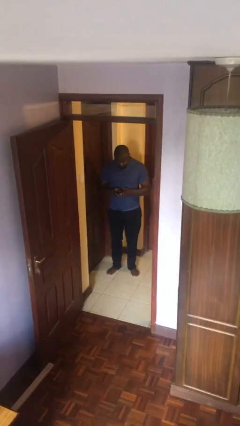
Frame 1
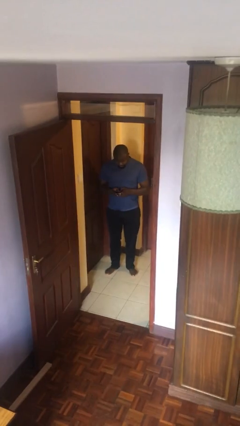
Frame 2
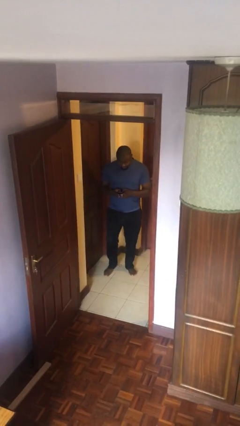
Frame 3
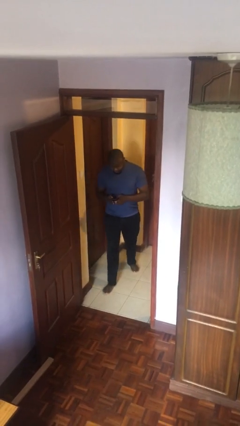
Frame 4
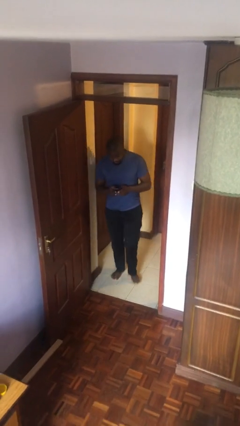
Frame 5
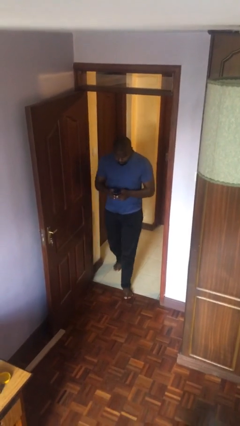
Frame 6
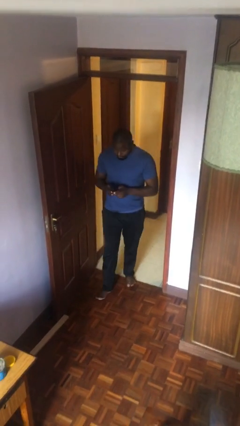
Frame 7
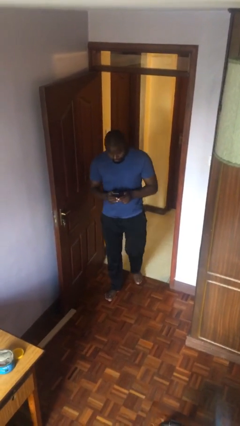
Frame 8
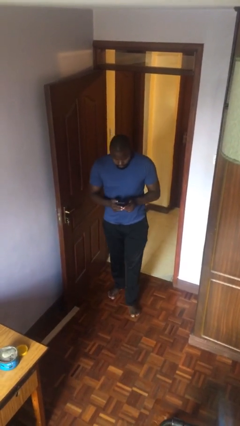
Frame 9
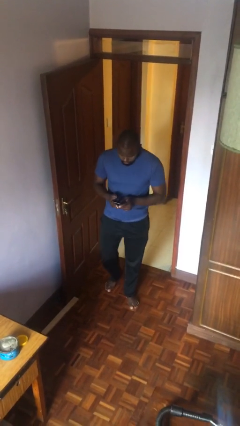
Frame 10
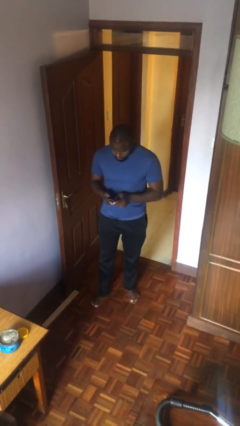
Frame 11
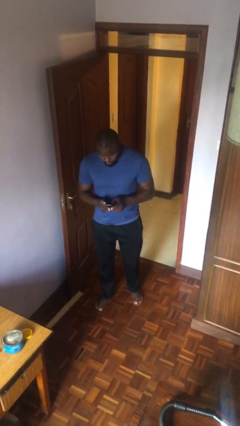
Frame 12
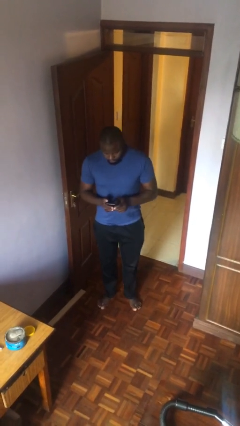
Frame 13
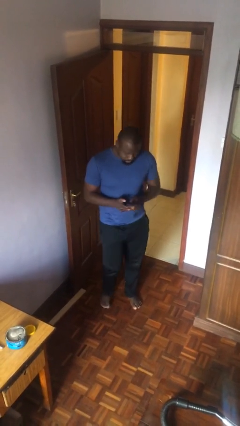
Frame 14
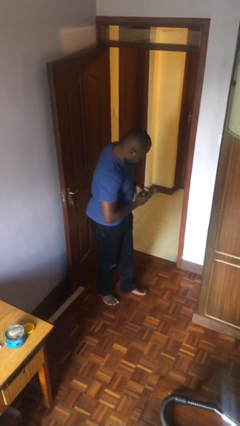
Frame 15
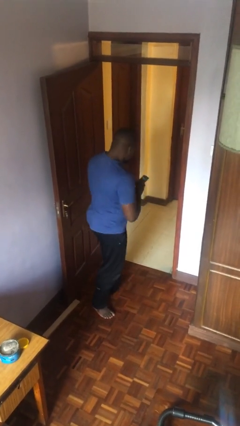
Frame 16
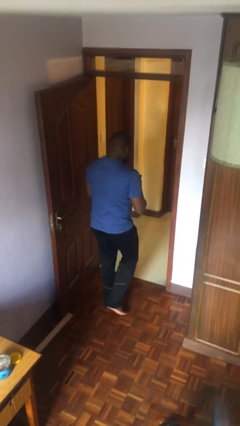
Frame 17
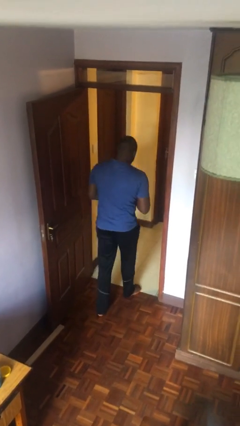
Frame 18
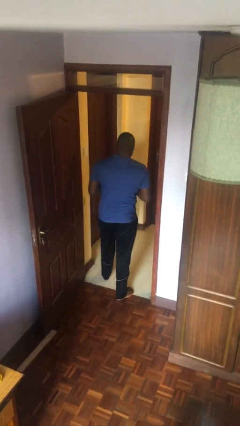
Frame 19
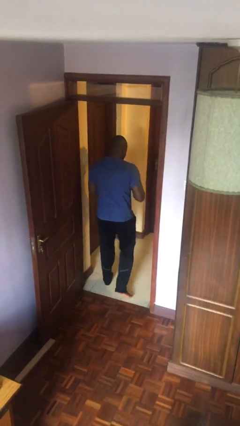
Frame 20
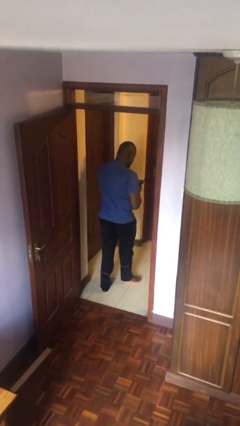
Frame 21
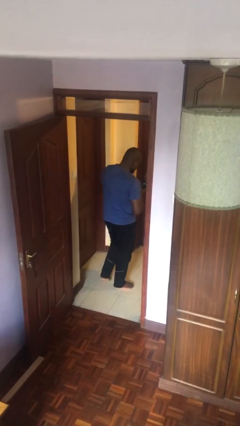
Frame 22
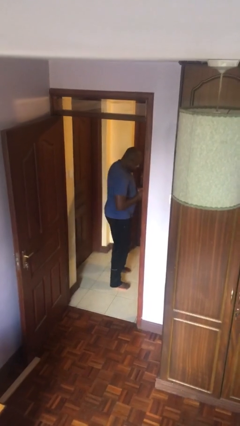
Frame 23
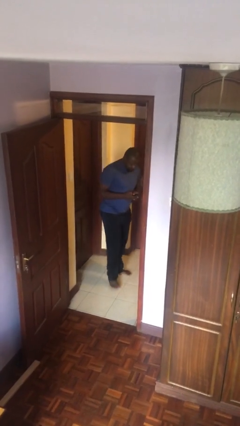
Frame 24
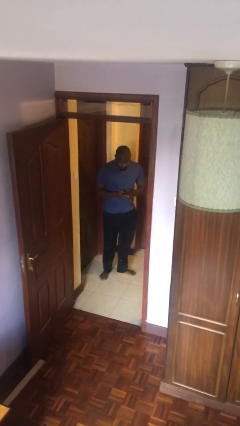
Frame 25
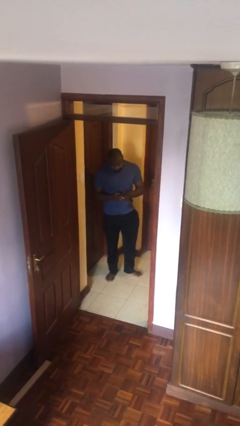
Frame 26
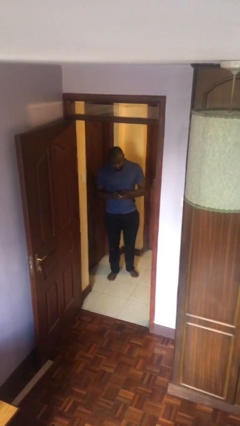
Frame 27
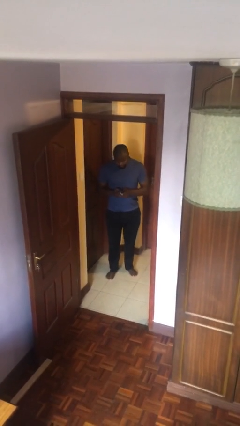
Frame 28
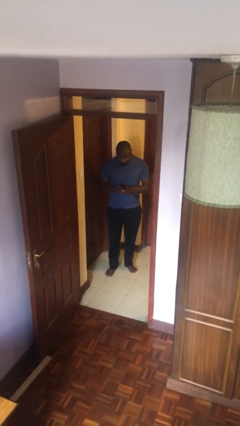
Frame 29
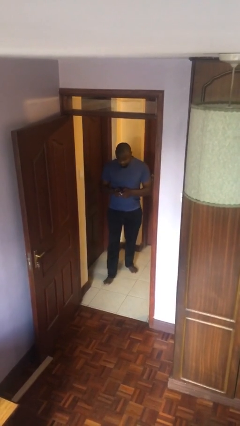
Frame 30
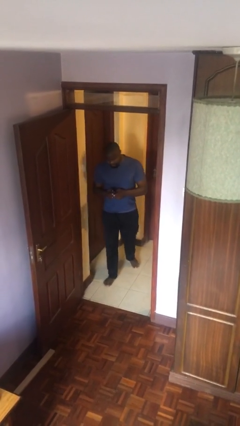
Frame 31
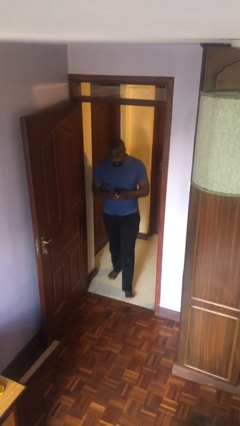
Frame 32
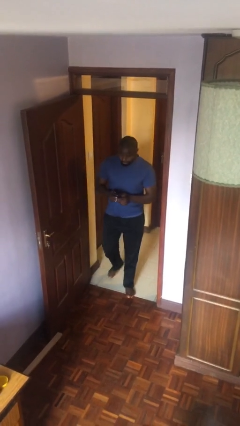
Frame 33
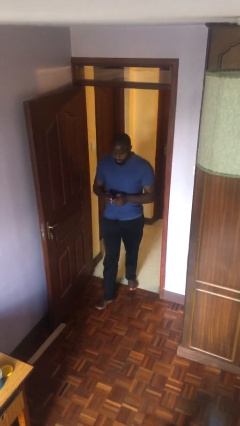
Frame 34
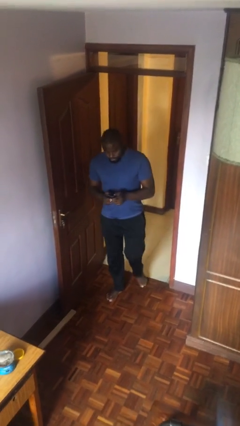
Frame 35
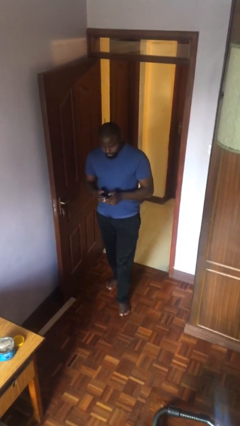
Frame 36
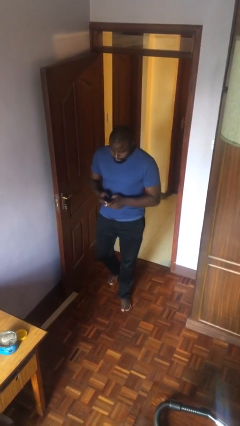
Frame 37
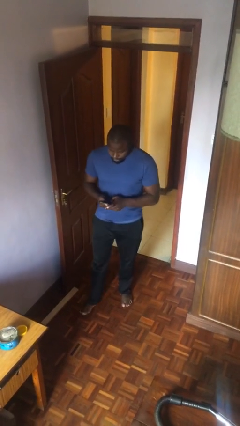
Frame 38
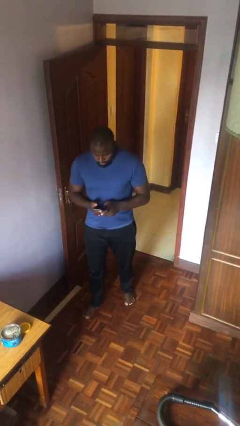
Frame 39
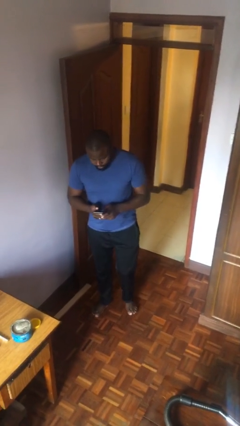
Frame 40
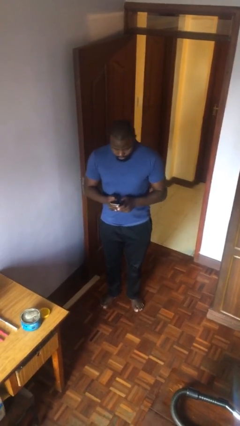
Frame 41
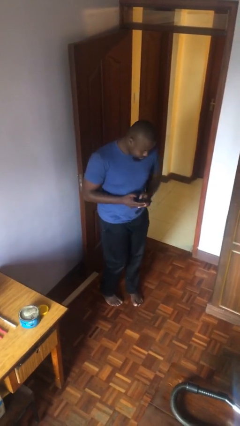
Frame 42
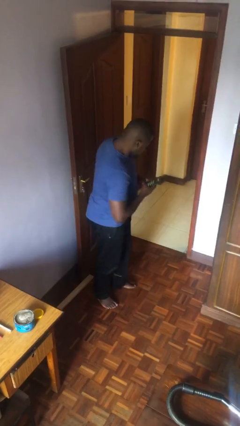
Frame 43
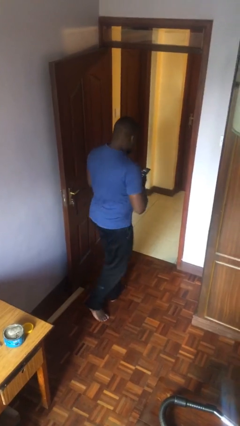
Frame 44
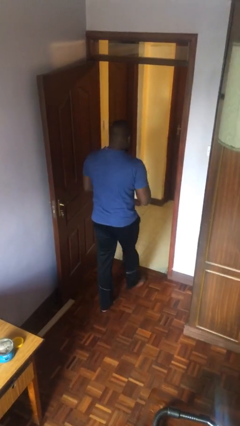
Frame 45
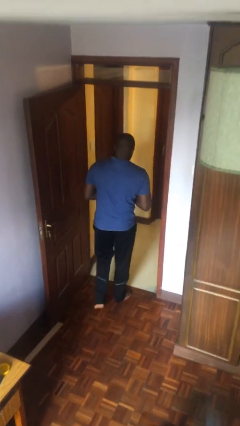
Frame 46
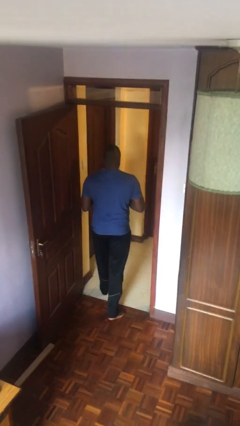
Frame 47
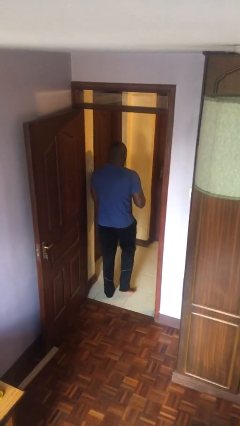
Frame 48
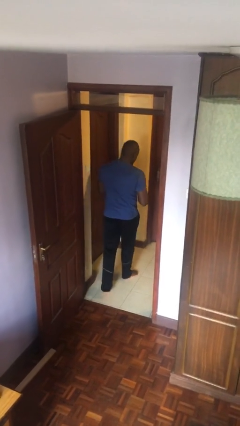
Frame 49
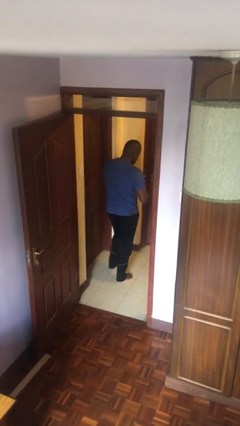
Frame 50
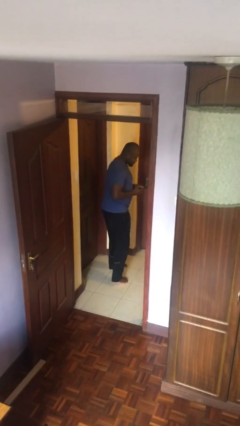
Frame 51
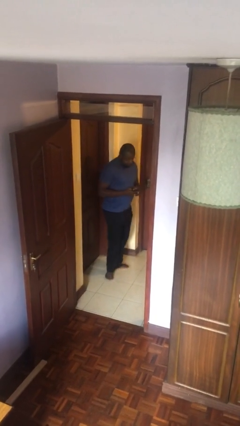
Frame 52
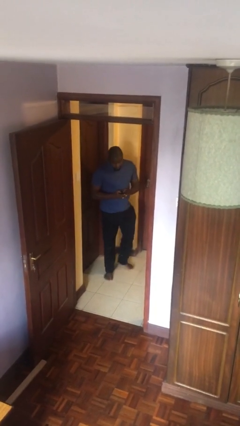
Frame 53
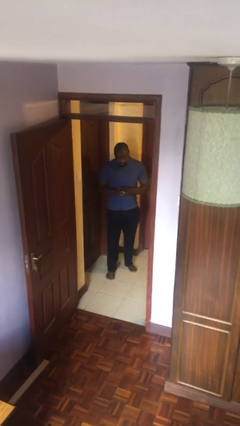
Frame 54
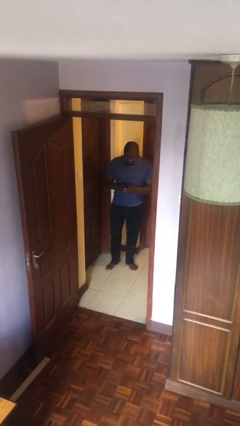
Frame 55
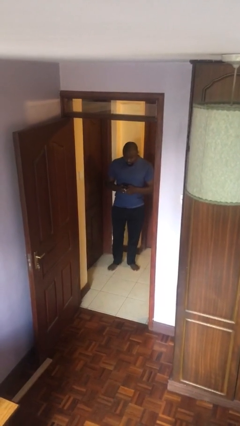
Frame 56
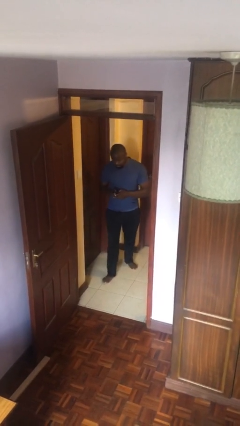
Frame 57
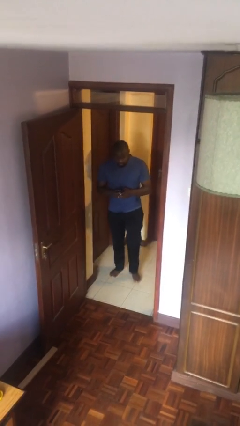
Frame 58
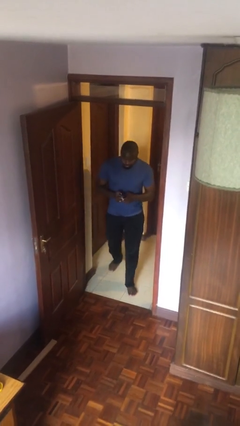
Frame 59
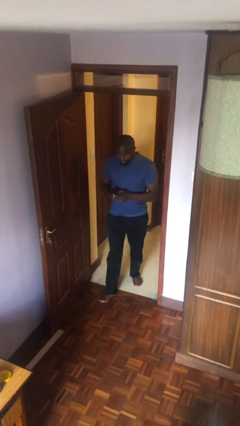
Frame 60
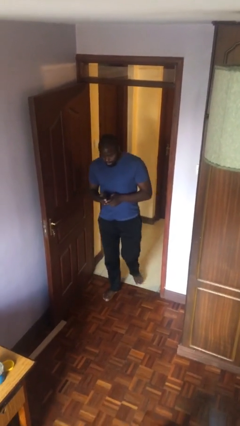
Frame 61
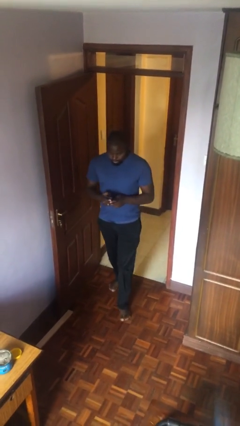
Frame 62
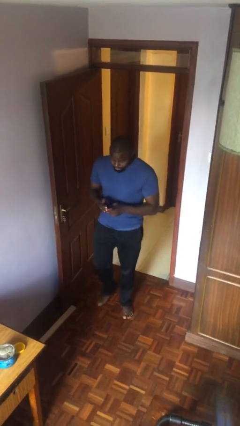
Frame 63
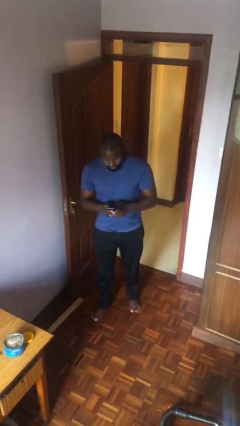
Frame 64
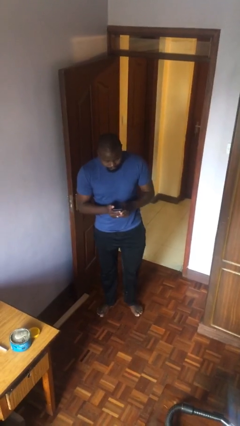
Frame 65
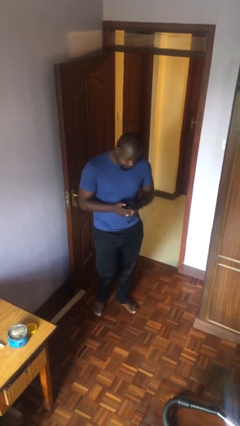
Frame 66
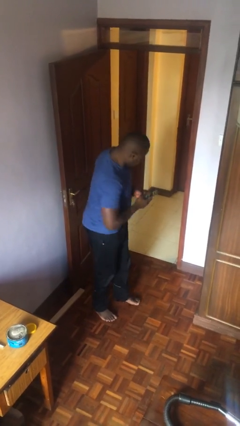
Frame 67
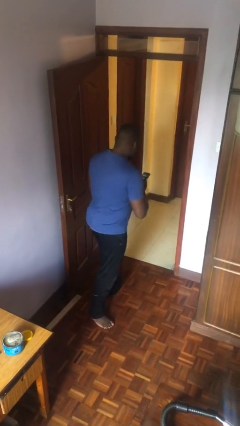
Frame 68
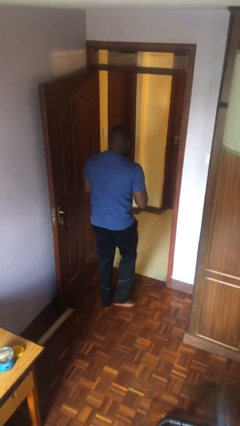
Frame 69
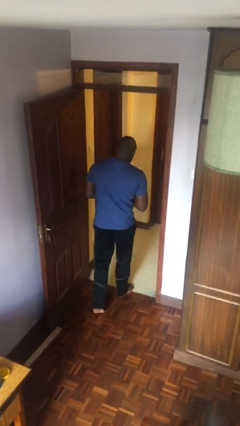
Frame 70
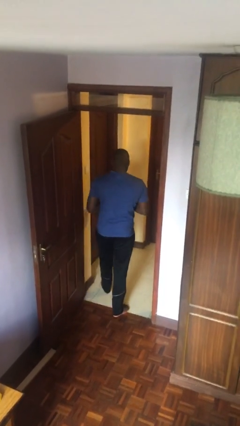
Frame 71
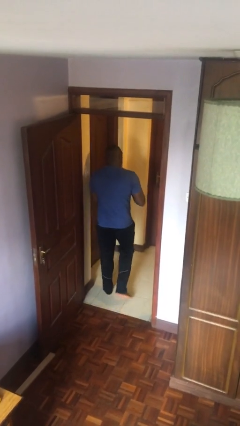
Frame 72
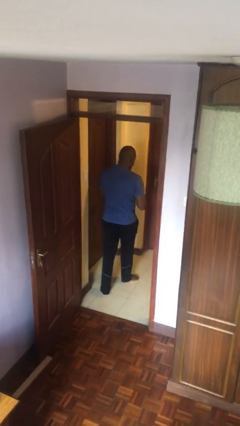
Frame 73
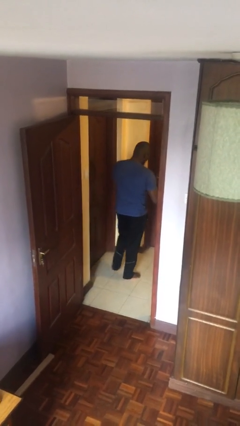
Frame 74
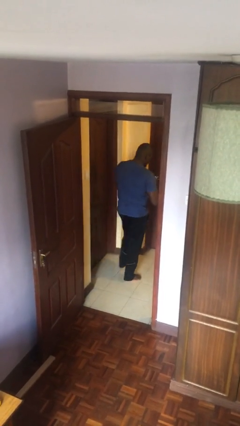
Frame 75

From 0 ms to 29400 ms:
person texts on phone

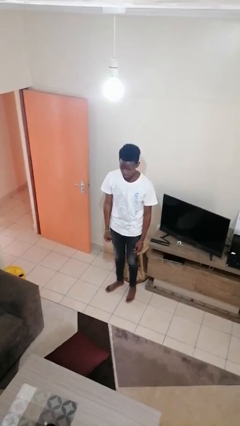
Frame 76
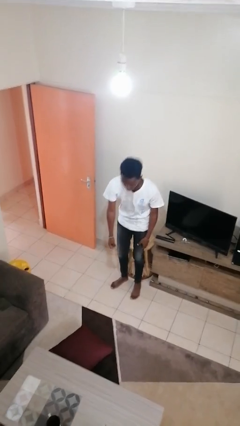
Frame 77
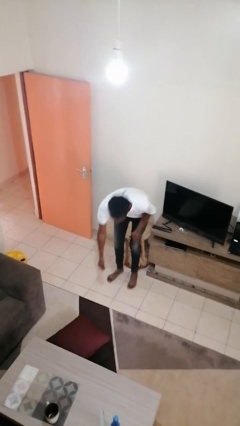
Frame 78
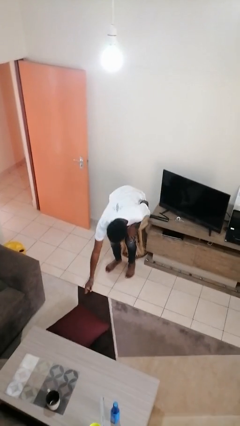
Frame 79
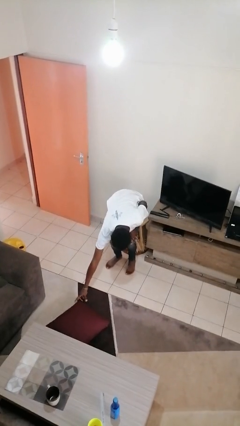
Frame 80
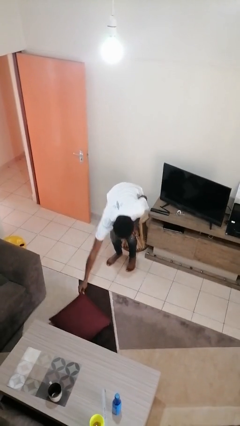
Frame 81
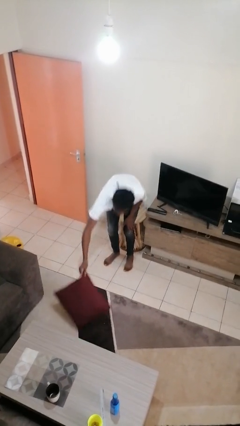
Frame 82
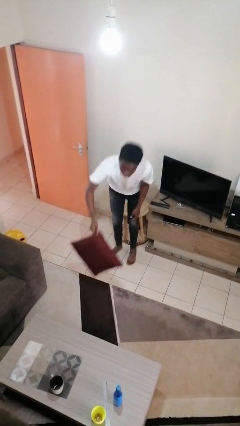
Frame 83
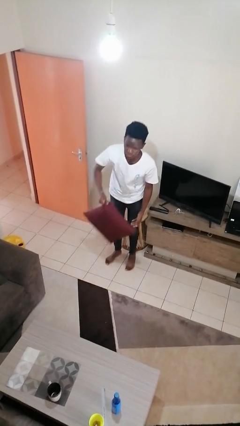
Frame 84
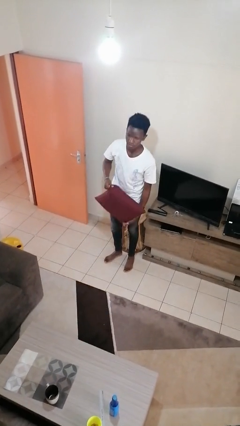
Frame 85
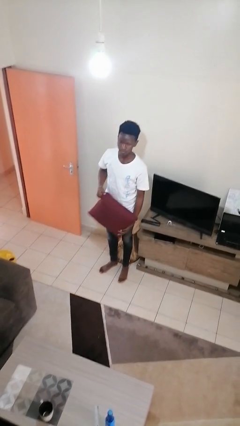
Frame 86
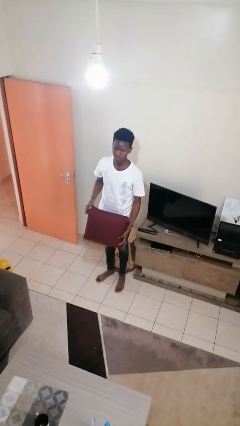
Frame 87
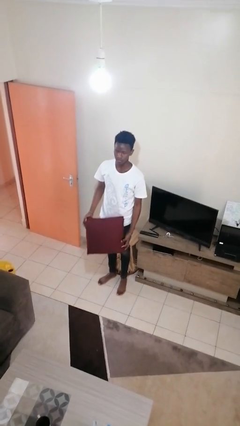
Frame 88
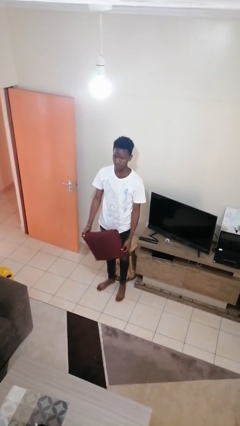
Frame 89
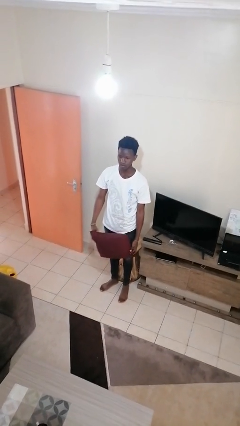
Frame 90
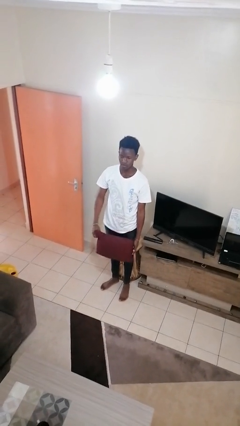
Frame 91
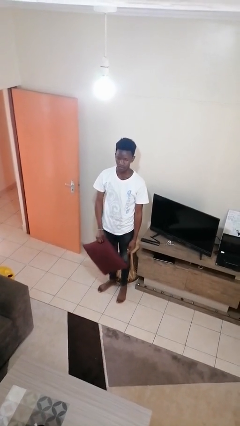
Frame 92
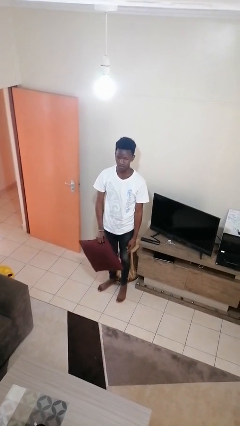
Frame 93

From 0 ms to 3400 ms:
person picks up object from floor
